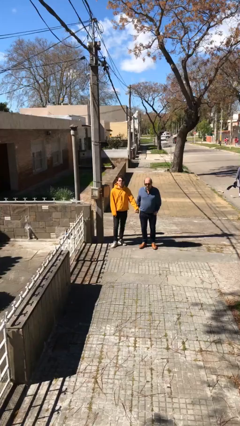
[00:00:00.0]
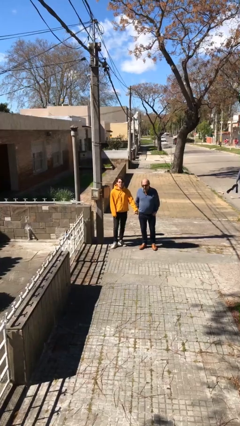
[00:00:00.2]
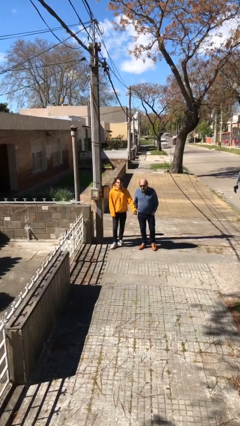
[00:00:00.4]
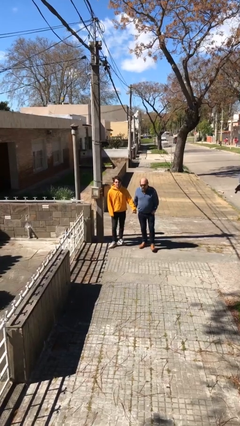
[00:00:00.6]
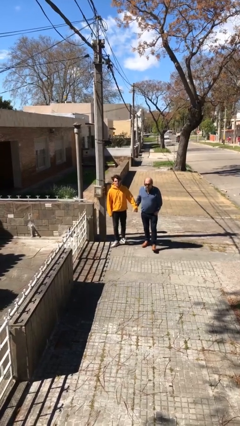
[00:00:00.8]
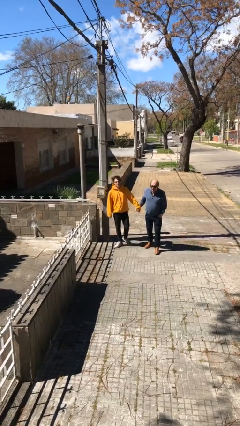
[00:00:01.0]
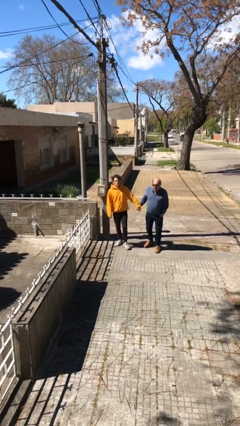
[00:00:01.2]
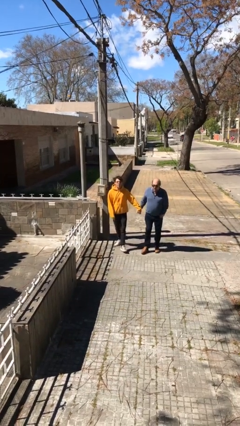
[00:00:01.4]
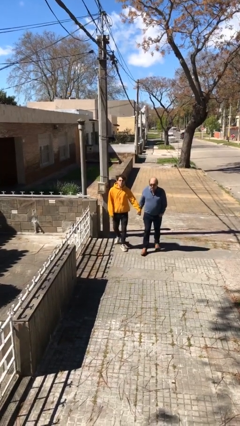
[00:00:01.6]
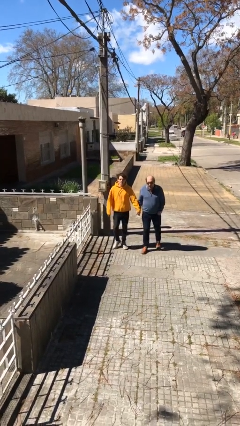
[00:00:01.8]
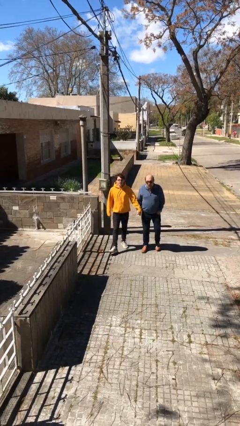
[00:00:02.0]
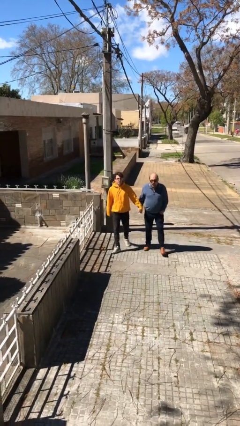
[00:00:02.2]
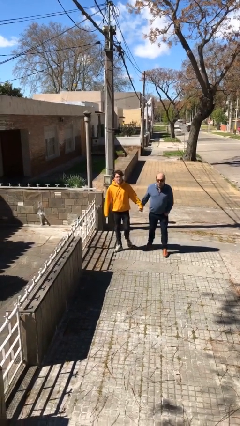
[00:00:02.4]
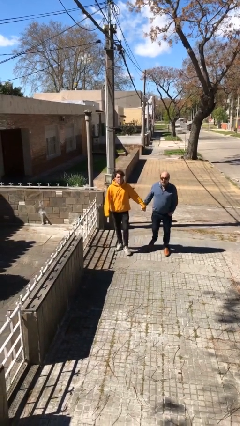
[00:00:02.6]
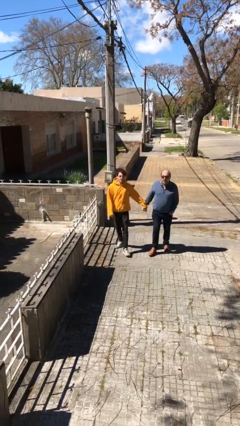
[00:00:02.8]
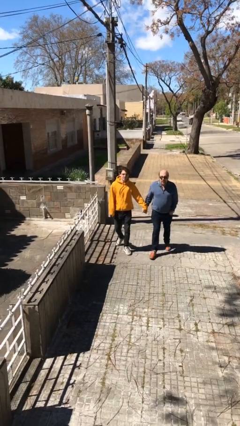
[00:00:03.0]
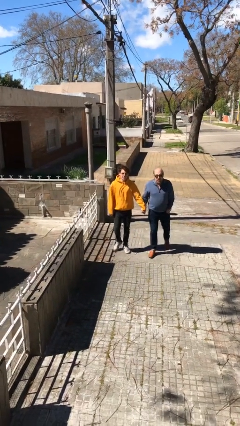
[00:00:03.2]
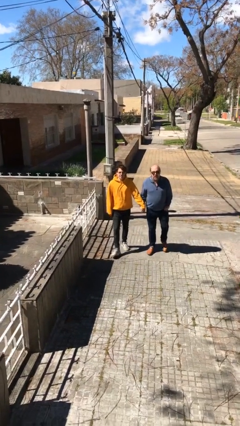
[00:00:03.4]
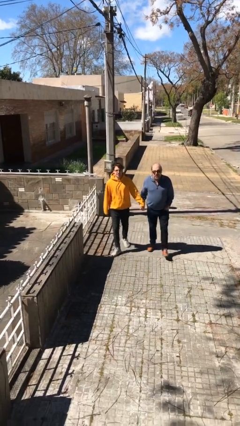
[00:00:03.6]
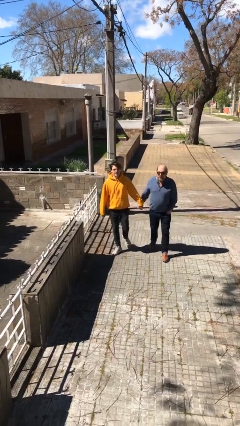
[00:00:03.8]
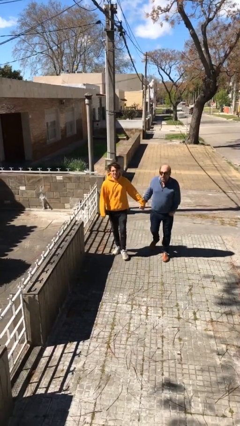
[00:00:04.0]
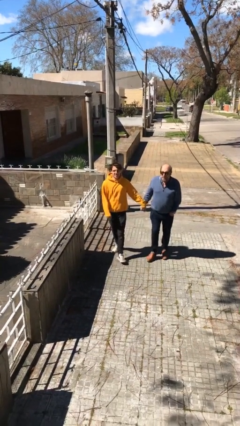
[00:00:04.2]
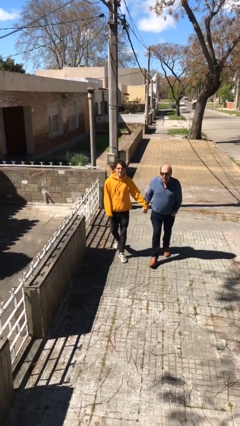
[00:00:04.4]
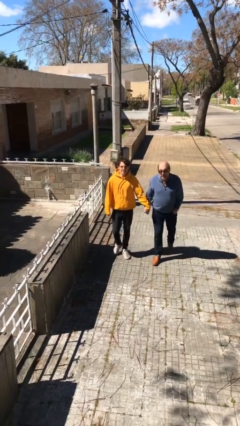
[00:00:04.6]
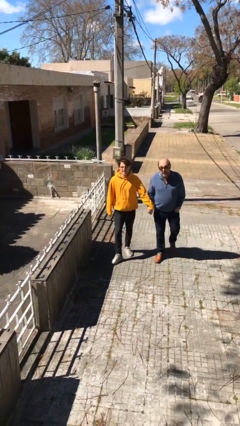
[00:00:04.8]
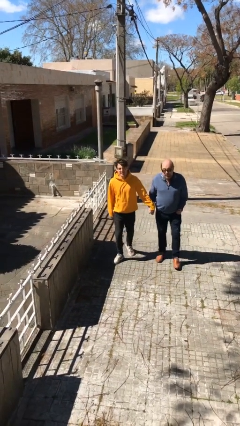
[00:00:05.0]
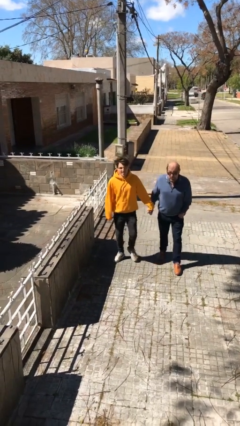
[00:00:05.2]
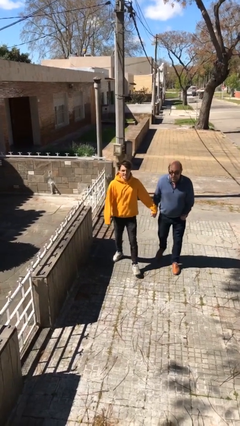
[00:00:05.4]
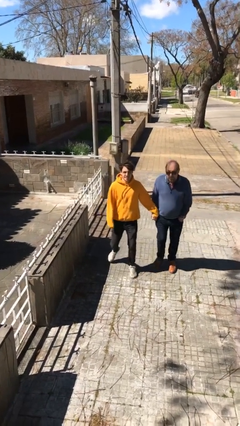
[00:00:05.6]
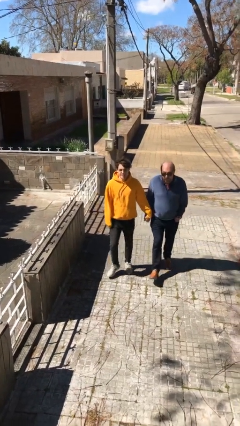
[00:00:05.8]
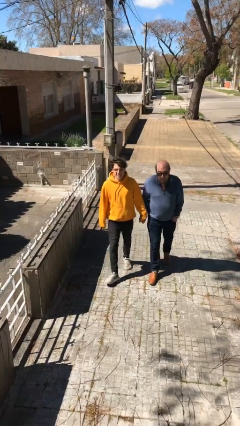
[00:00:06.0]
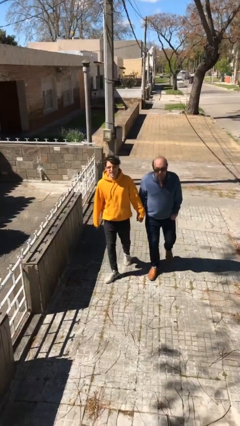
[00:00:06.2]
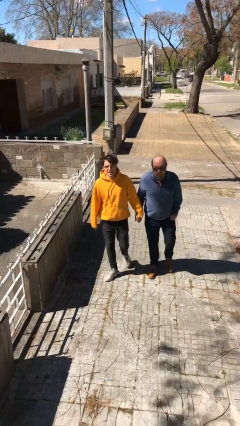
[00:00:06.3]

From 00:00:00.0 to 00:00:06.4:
person holds hand

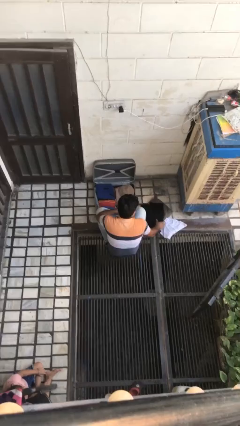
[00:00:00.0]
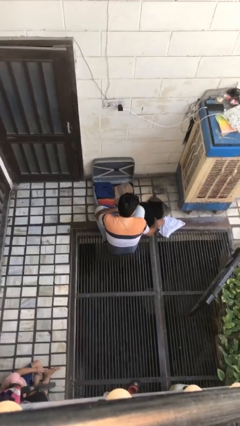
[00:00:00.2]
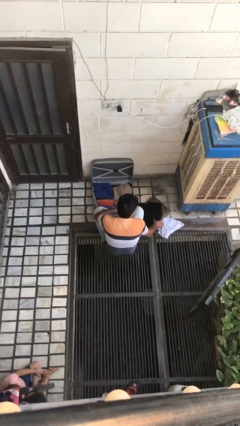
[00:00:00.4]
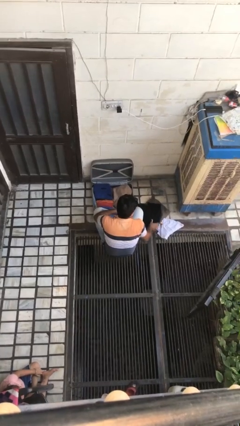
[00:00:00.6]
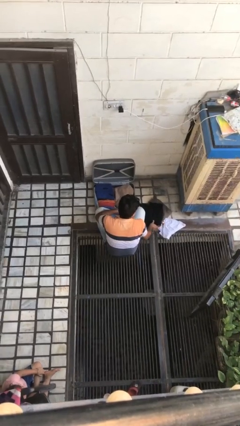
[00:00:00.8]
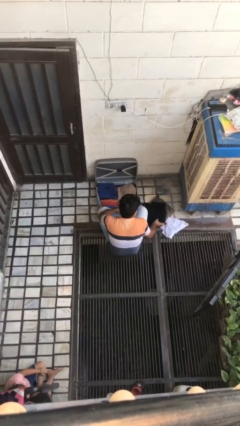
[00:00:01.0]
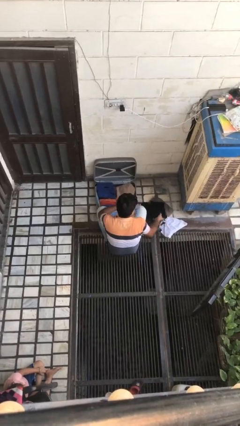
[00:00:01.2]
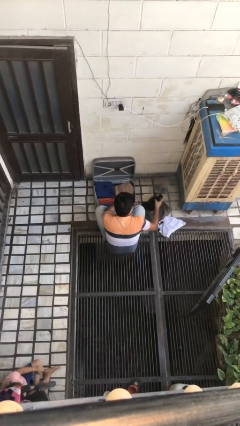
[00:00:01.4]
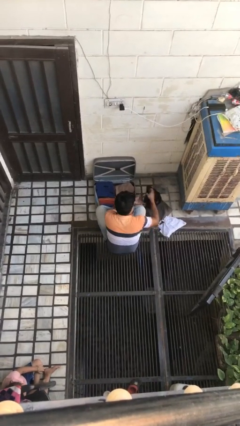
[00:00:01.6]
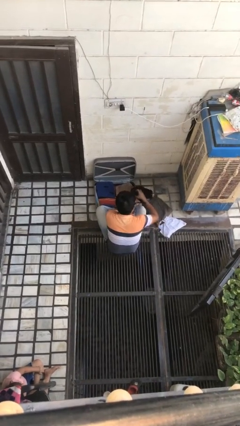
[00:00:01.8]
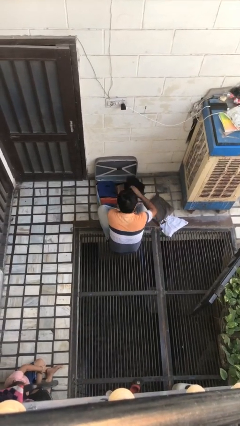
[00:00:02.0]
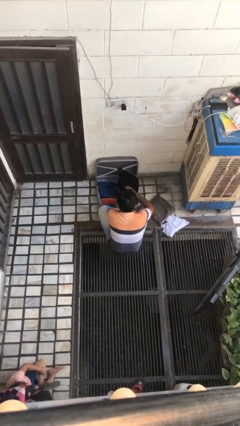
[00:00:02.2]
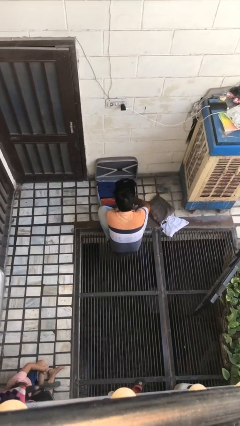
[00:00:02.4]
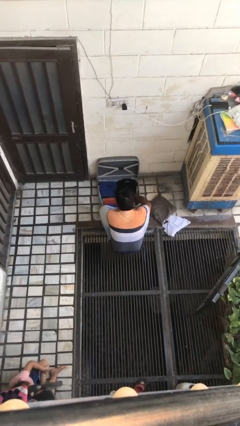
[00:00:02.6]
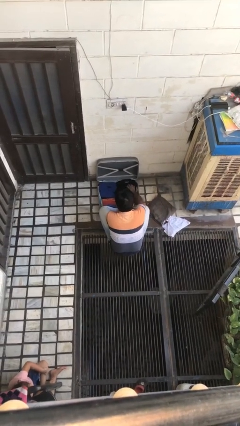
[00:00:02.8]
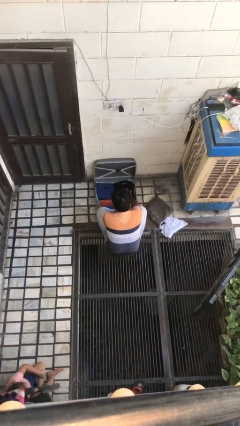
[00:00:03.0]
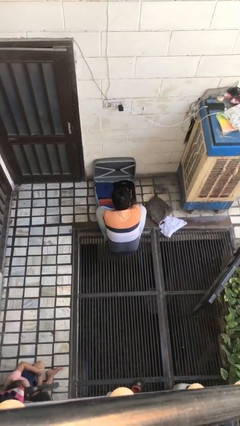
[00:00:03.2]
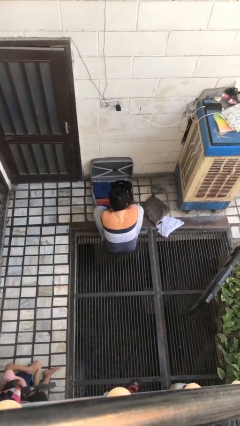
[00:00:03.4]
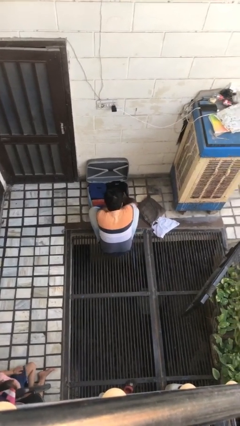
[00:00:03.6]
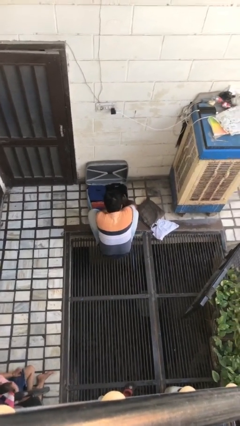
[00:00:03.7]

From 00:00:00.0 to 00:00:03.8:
person loads clothes into suitcase

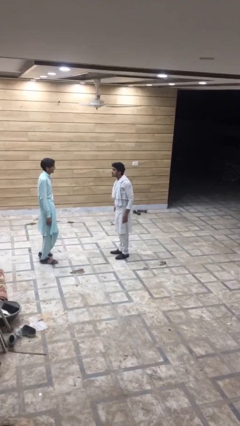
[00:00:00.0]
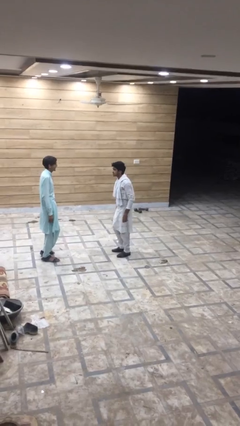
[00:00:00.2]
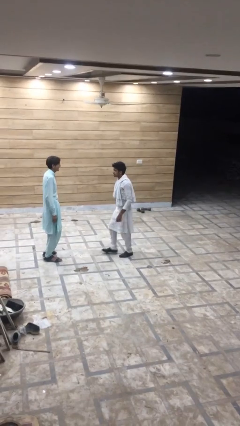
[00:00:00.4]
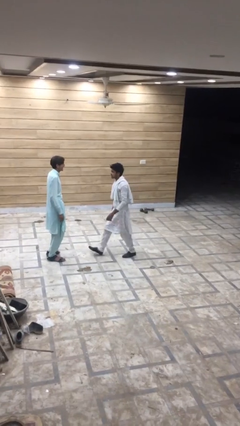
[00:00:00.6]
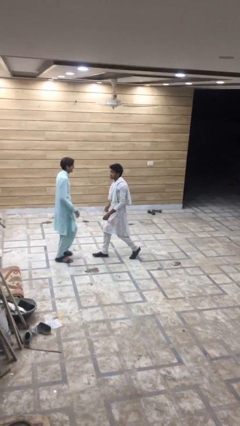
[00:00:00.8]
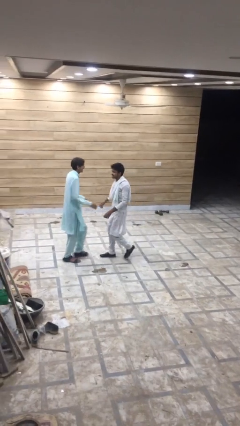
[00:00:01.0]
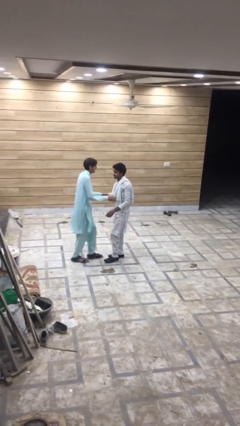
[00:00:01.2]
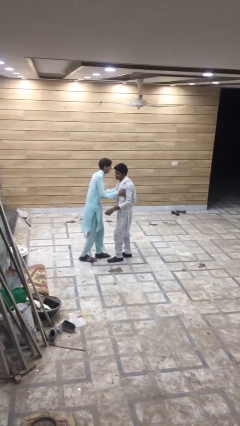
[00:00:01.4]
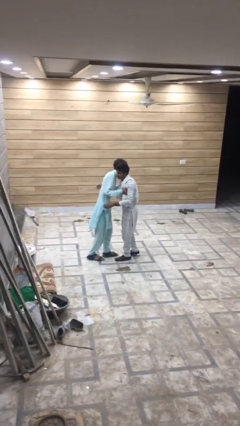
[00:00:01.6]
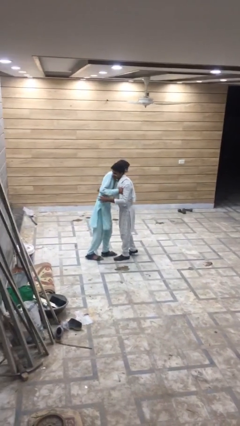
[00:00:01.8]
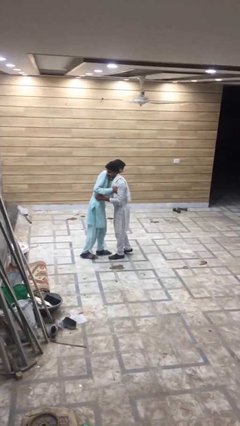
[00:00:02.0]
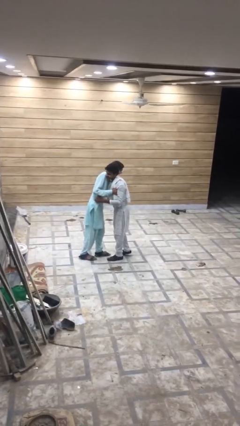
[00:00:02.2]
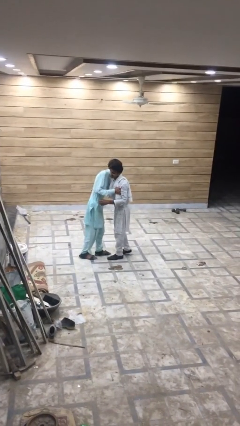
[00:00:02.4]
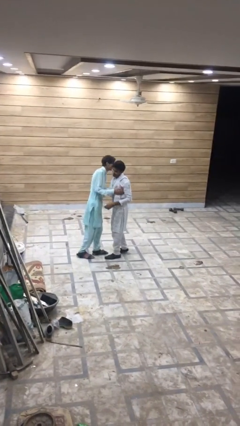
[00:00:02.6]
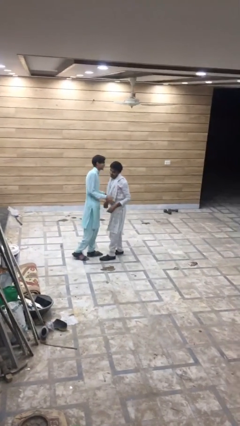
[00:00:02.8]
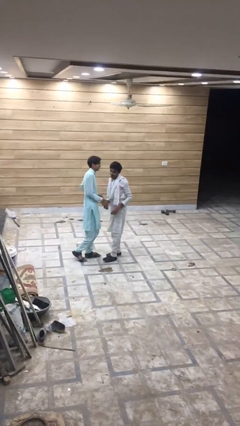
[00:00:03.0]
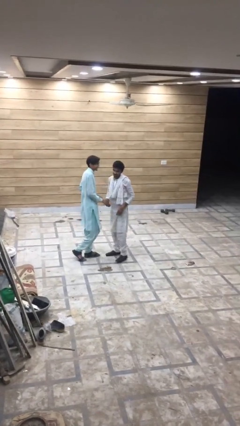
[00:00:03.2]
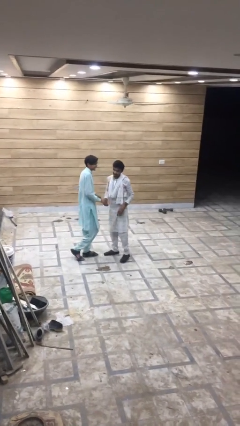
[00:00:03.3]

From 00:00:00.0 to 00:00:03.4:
person embraces person

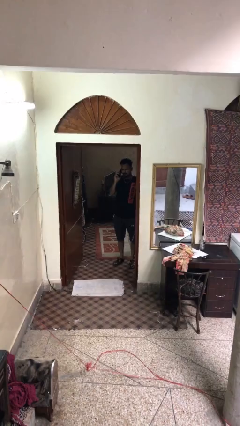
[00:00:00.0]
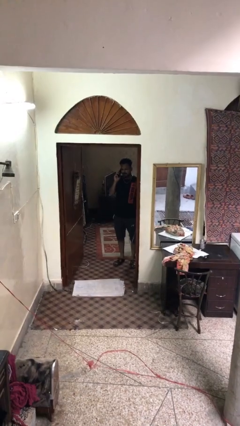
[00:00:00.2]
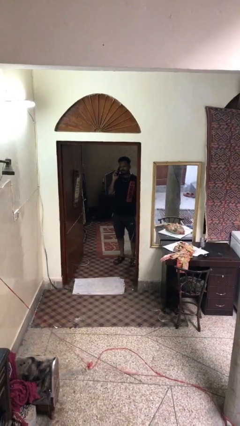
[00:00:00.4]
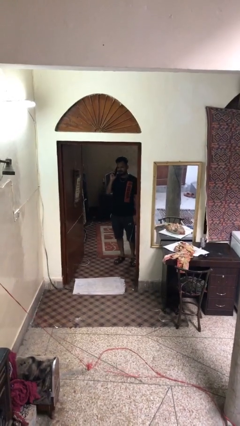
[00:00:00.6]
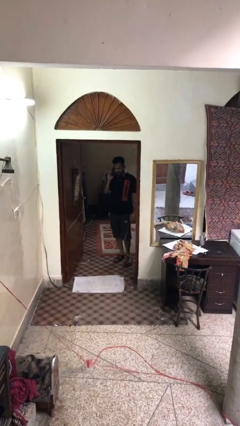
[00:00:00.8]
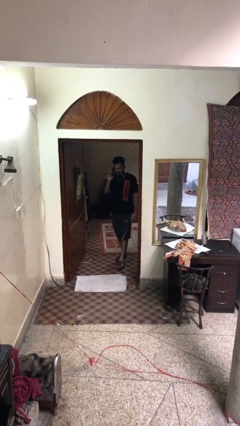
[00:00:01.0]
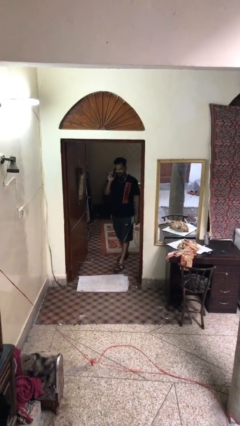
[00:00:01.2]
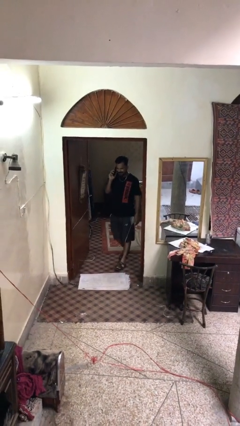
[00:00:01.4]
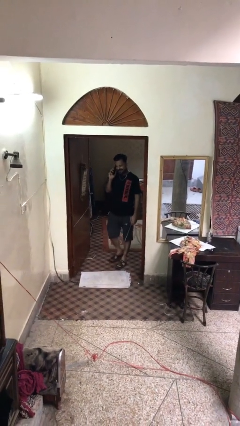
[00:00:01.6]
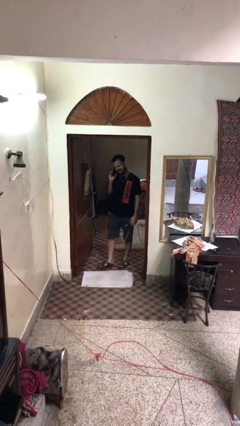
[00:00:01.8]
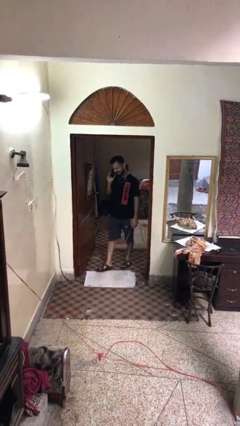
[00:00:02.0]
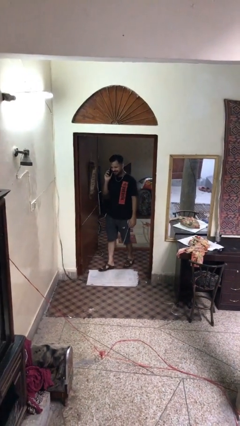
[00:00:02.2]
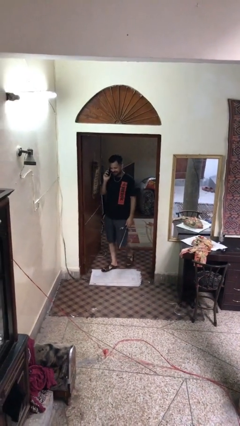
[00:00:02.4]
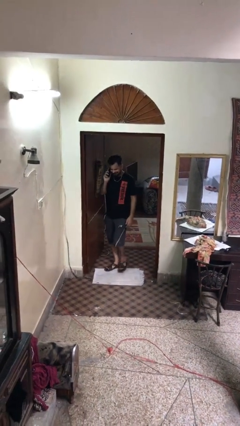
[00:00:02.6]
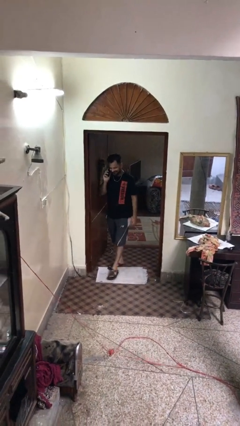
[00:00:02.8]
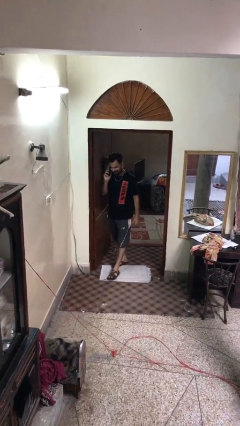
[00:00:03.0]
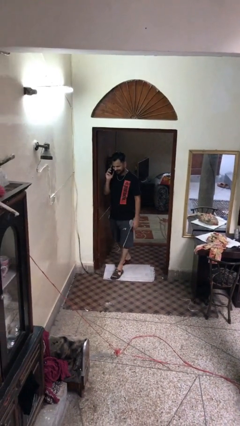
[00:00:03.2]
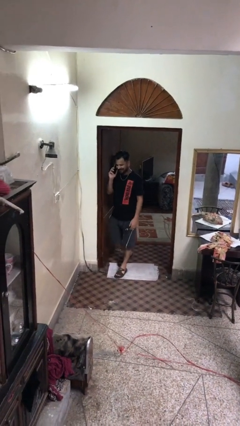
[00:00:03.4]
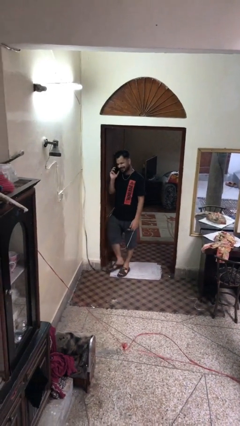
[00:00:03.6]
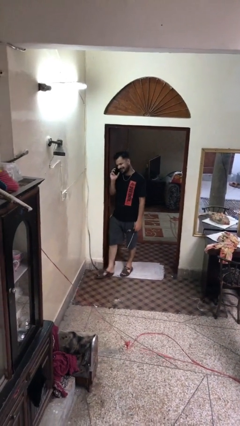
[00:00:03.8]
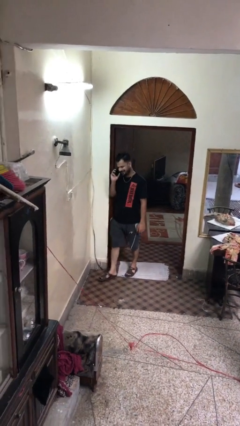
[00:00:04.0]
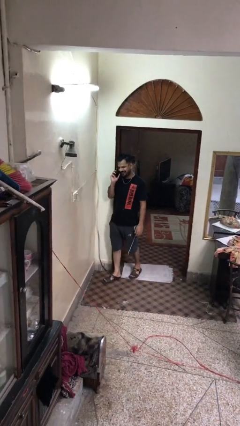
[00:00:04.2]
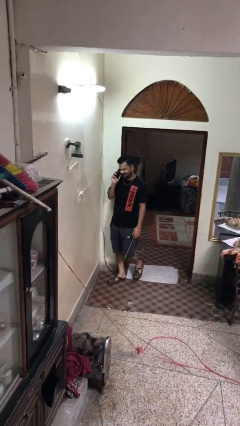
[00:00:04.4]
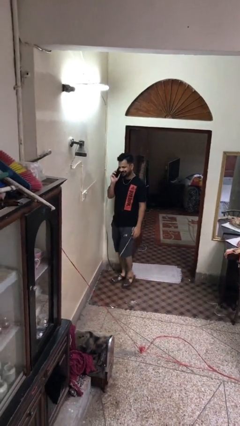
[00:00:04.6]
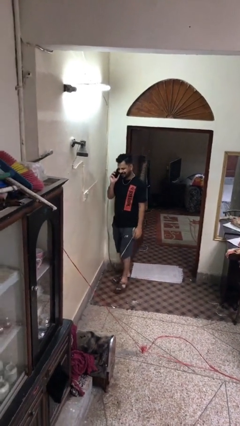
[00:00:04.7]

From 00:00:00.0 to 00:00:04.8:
person enters scene through structure
